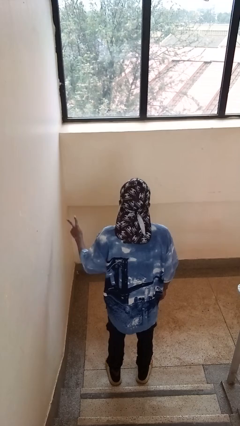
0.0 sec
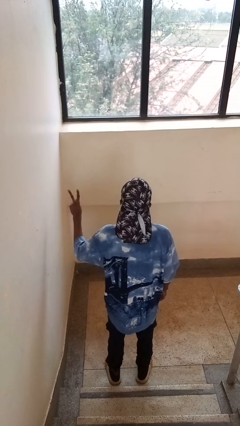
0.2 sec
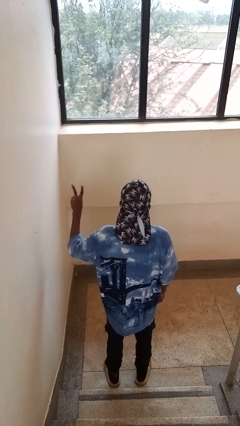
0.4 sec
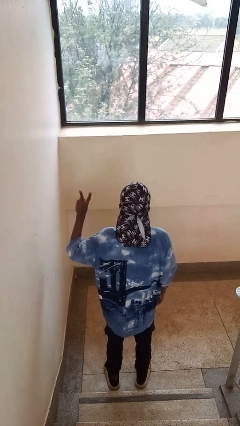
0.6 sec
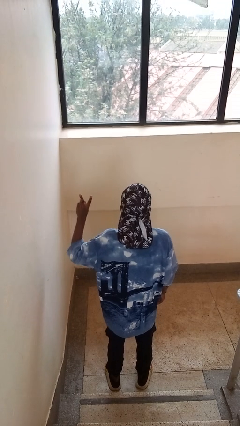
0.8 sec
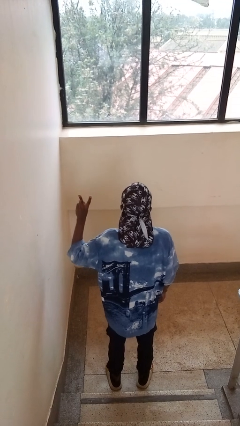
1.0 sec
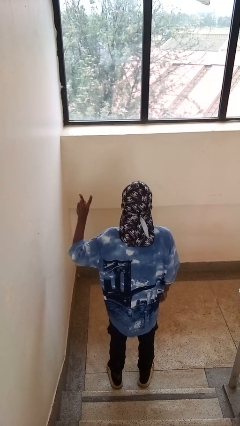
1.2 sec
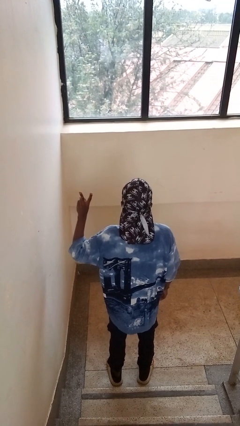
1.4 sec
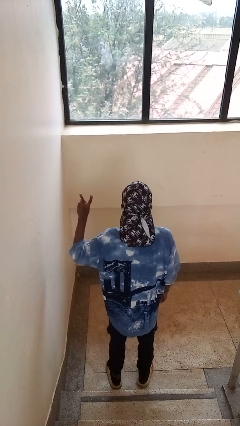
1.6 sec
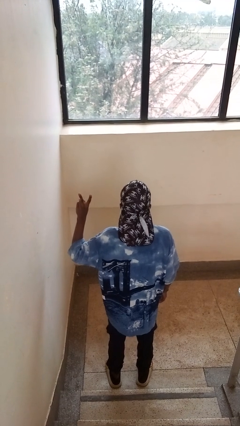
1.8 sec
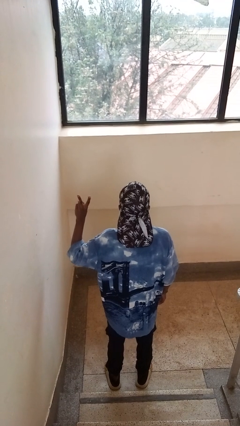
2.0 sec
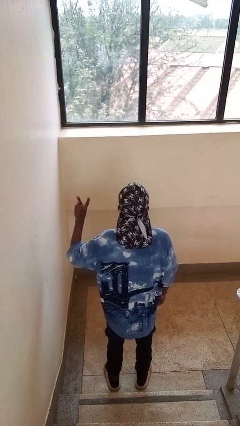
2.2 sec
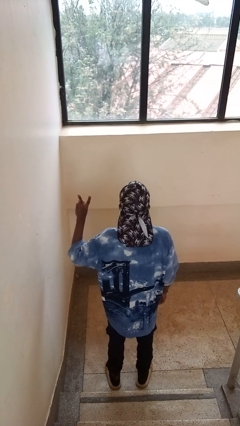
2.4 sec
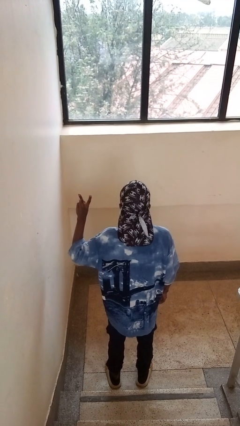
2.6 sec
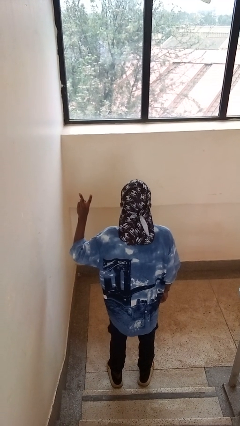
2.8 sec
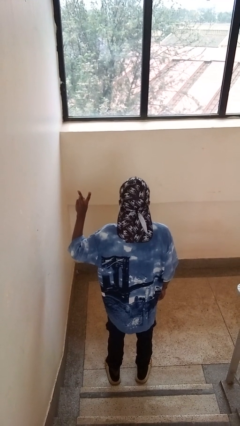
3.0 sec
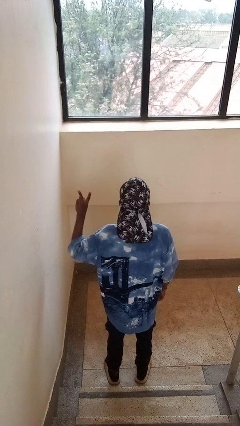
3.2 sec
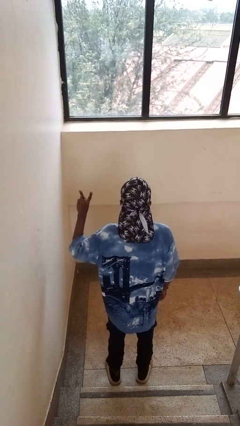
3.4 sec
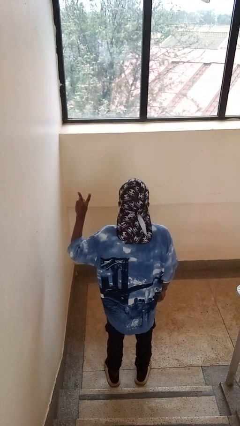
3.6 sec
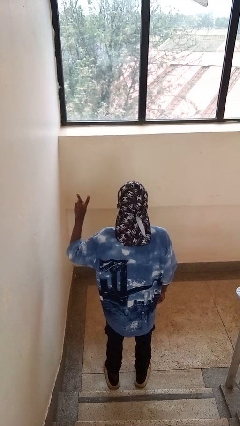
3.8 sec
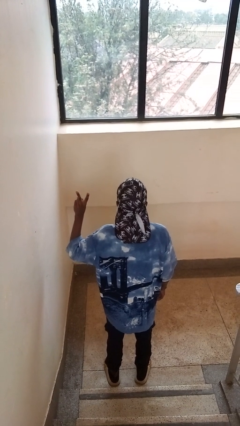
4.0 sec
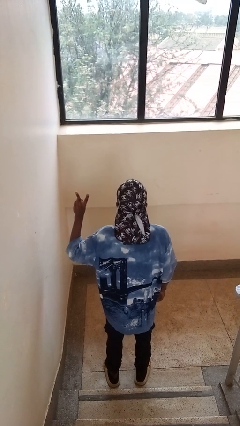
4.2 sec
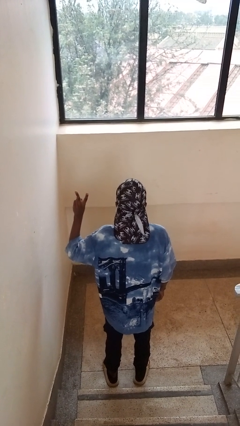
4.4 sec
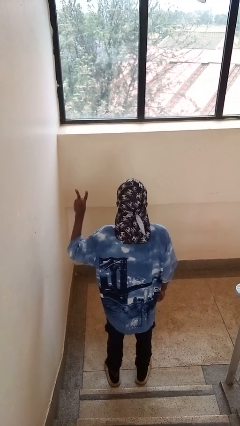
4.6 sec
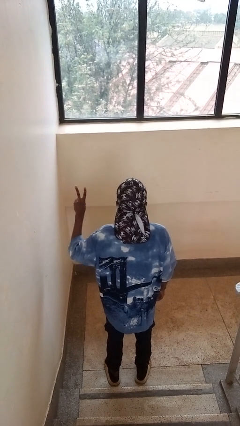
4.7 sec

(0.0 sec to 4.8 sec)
person gestures peace

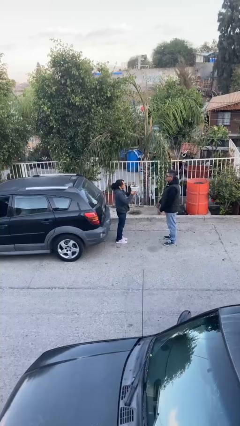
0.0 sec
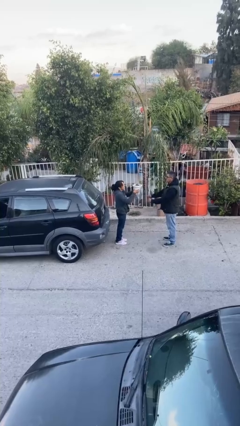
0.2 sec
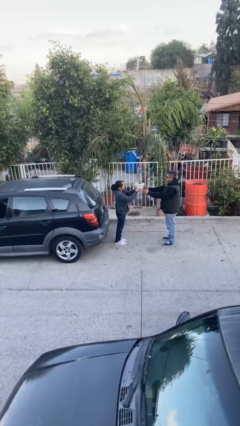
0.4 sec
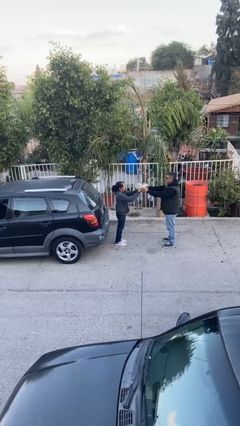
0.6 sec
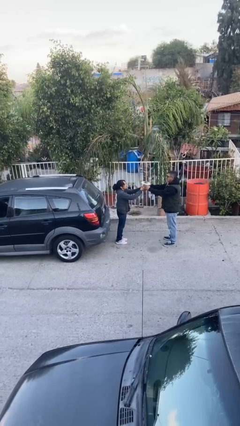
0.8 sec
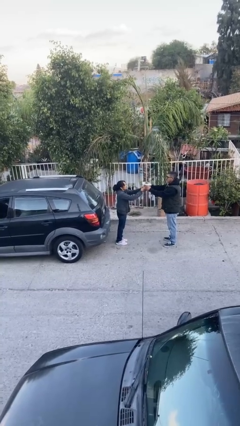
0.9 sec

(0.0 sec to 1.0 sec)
person transfers object to person

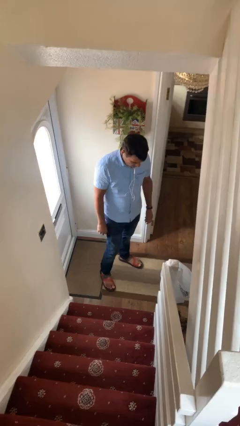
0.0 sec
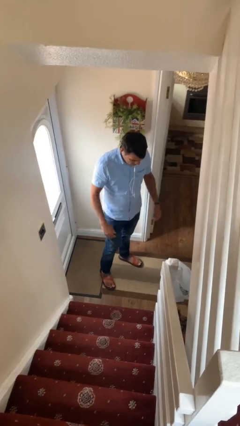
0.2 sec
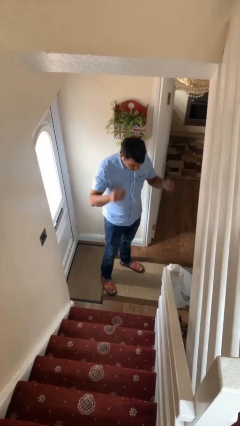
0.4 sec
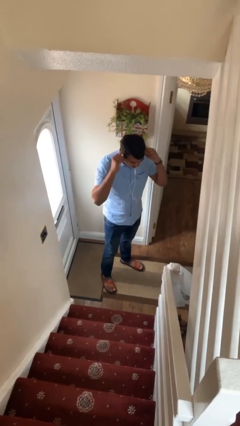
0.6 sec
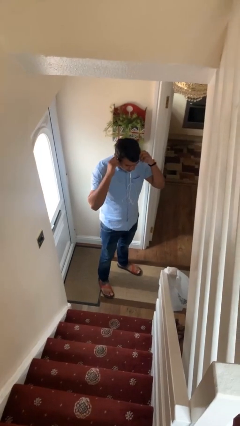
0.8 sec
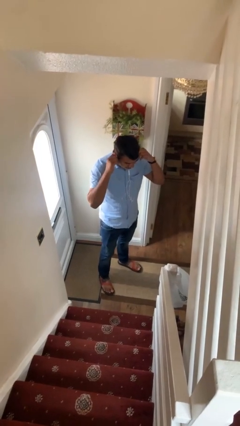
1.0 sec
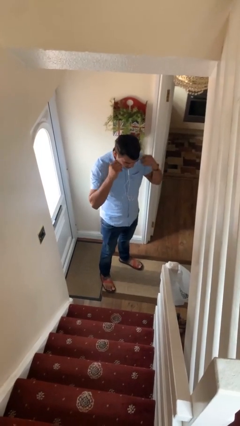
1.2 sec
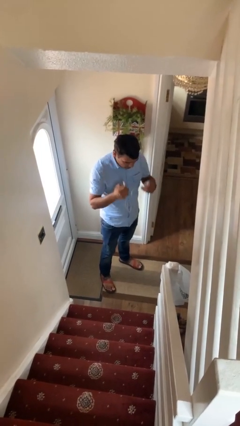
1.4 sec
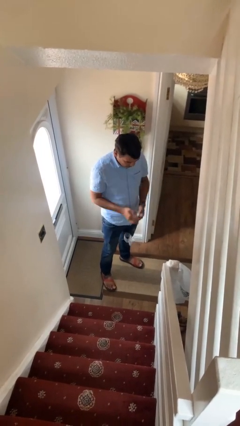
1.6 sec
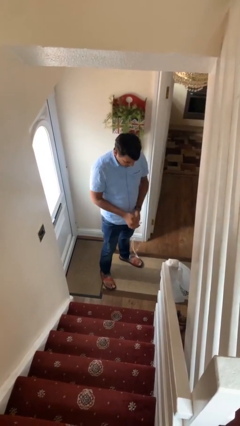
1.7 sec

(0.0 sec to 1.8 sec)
person takes off headphones

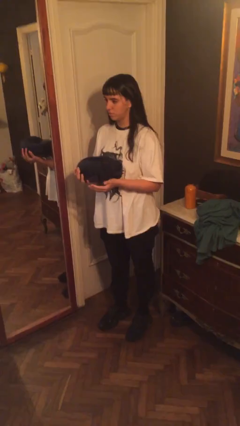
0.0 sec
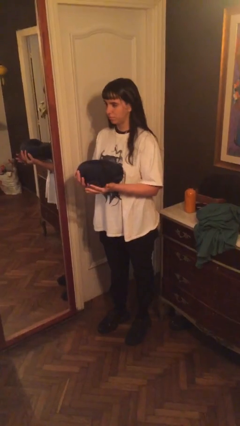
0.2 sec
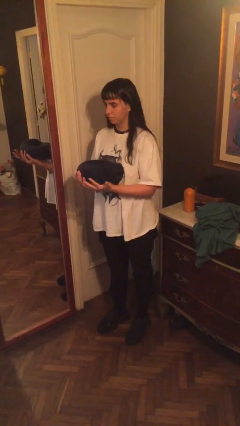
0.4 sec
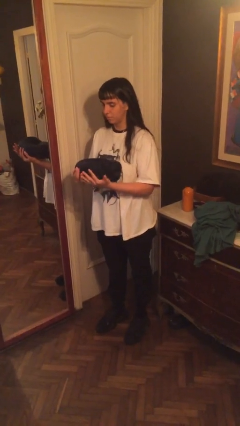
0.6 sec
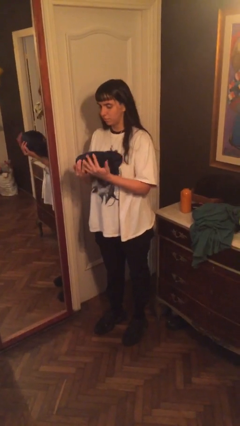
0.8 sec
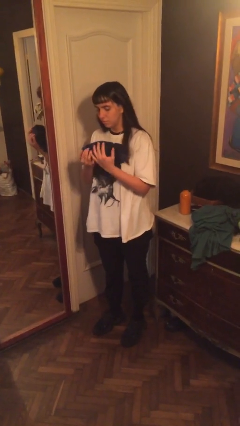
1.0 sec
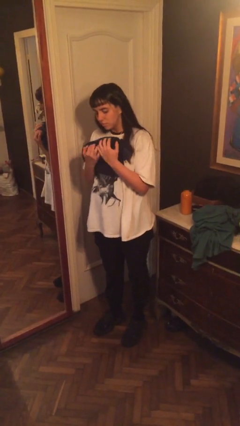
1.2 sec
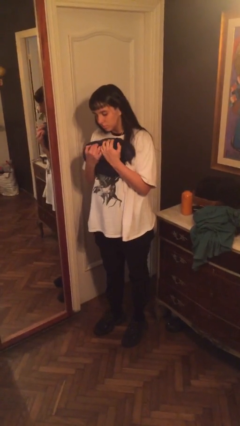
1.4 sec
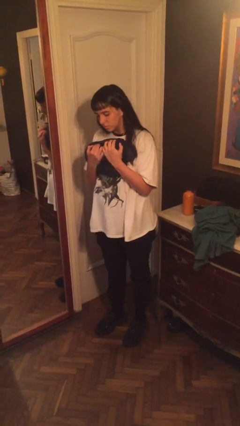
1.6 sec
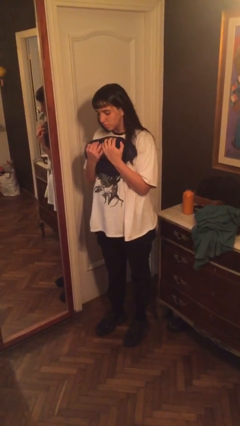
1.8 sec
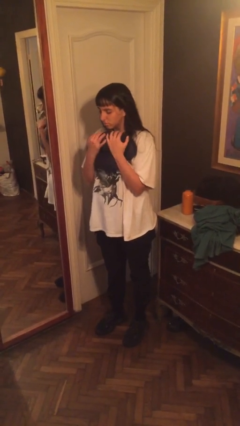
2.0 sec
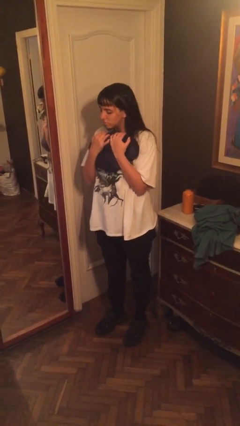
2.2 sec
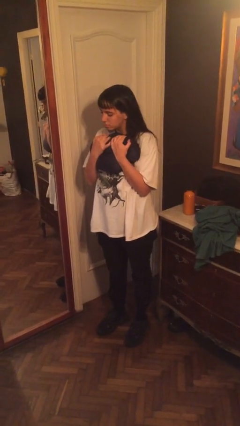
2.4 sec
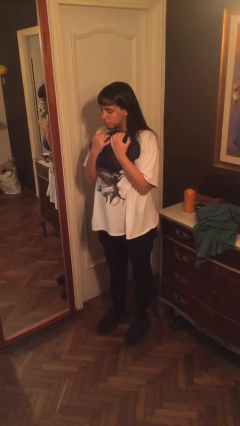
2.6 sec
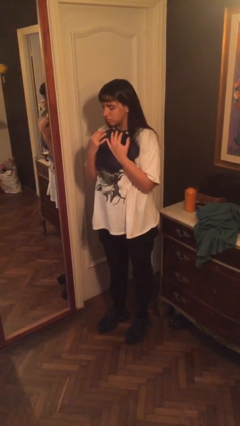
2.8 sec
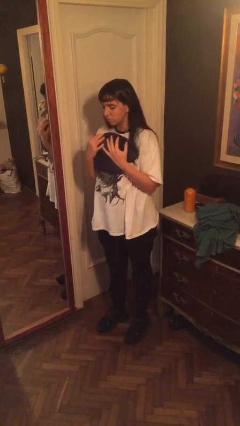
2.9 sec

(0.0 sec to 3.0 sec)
person squeezes object

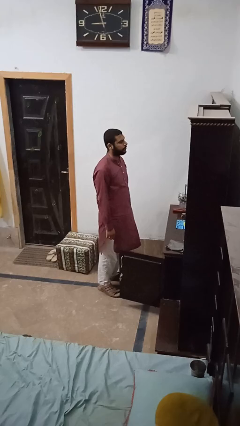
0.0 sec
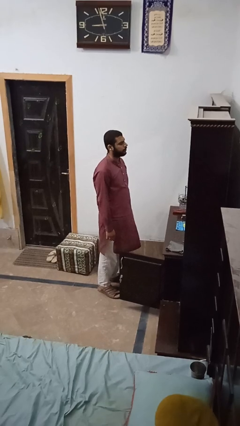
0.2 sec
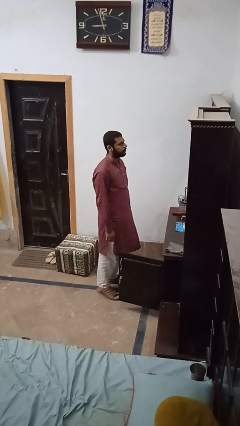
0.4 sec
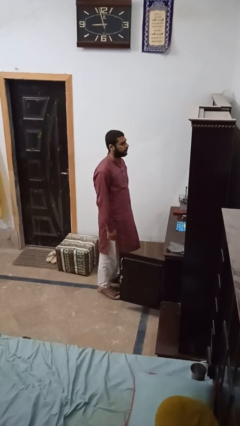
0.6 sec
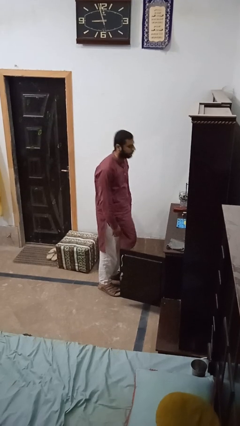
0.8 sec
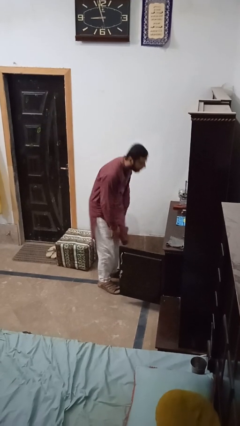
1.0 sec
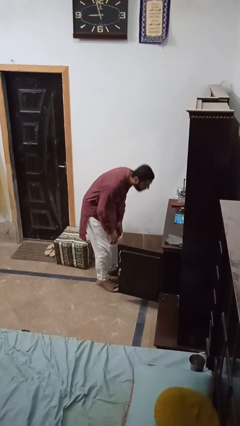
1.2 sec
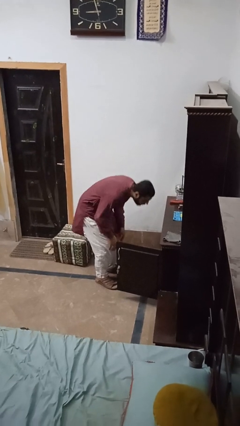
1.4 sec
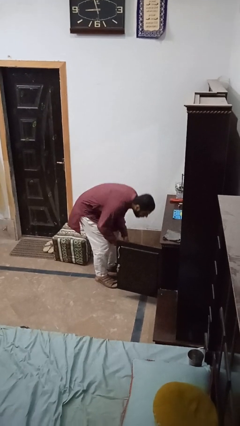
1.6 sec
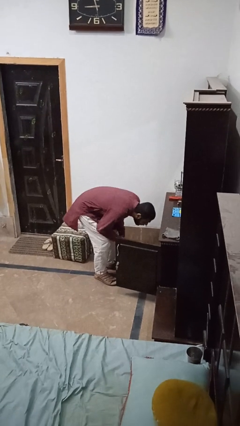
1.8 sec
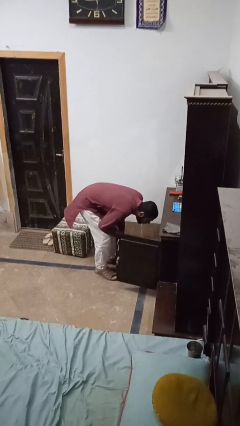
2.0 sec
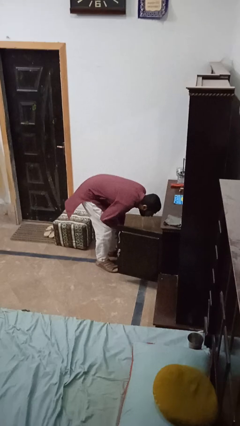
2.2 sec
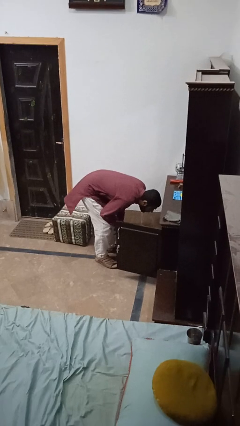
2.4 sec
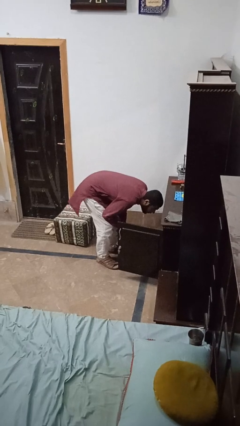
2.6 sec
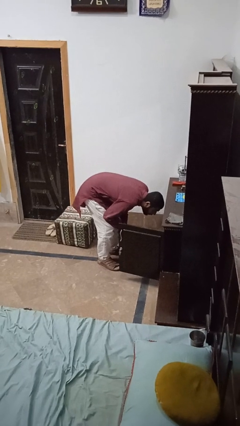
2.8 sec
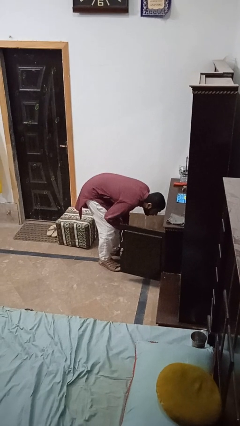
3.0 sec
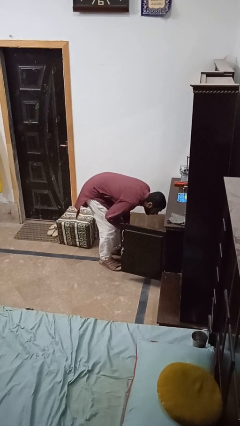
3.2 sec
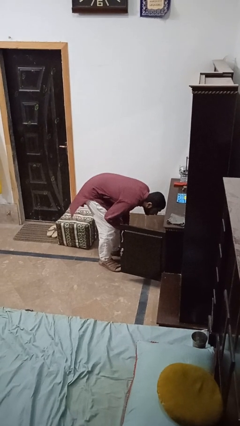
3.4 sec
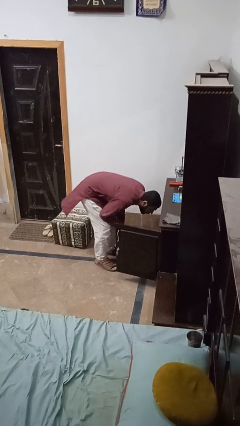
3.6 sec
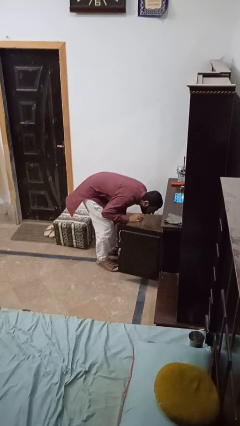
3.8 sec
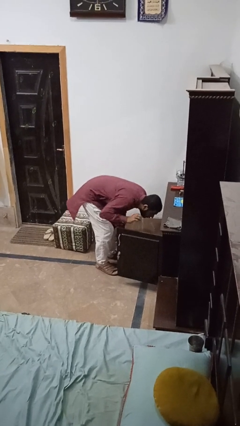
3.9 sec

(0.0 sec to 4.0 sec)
person searches in cabinet

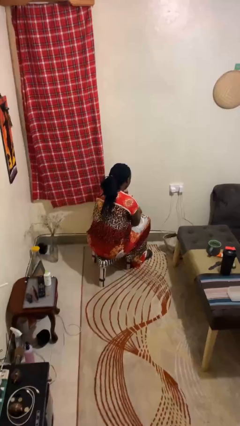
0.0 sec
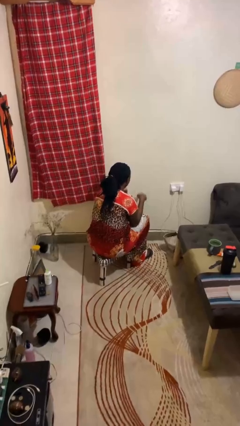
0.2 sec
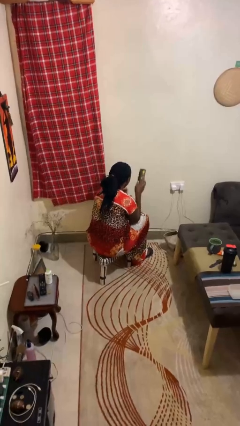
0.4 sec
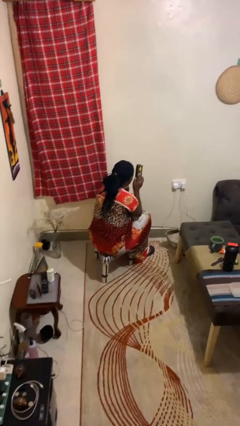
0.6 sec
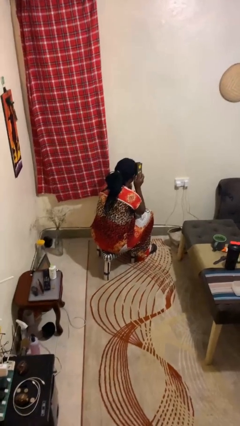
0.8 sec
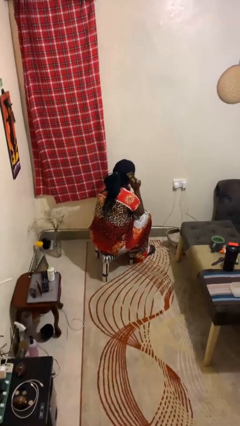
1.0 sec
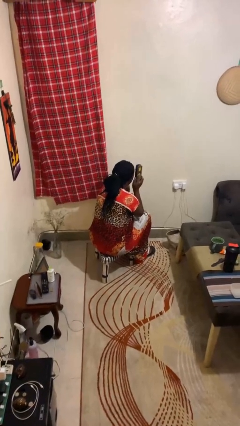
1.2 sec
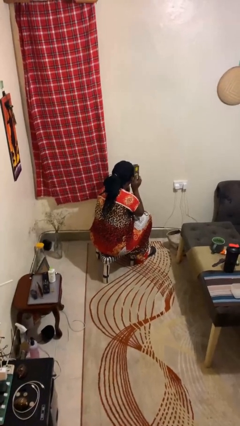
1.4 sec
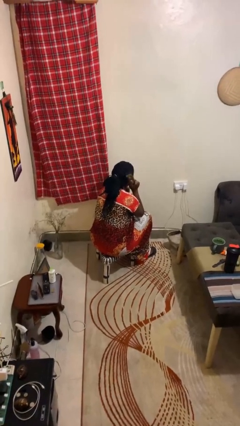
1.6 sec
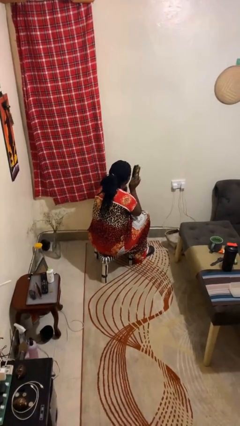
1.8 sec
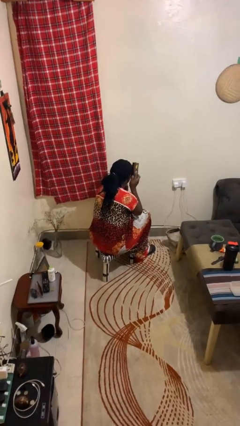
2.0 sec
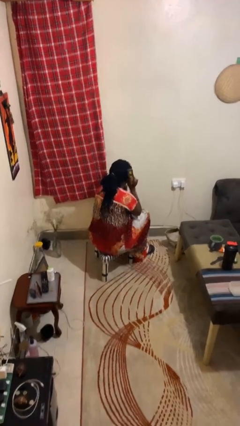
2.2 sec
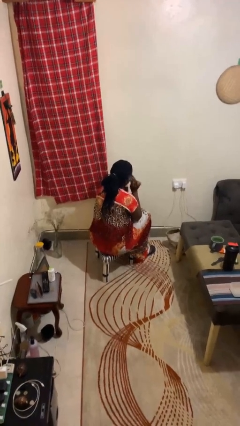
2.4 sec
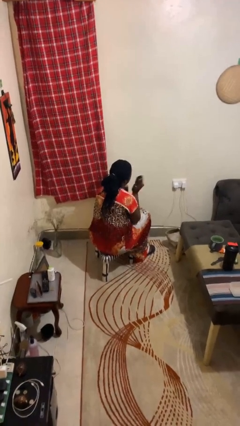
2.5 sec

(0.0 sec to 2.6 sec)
person brushes hair

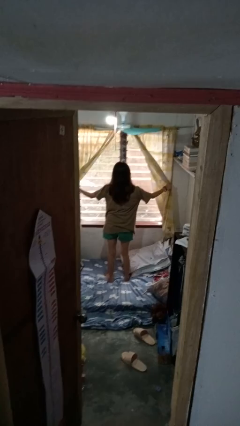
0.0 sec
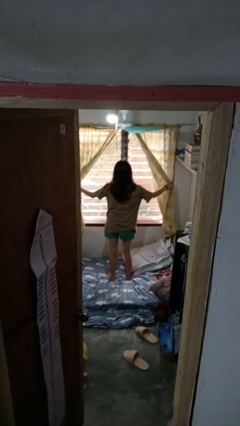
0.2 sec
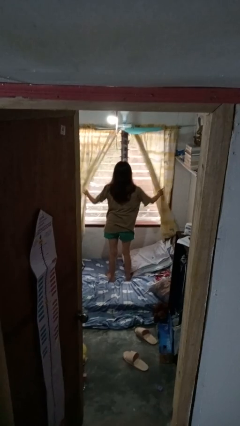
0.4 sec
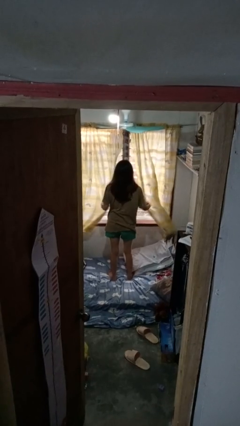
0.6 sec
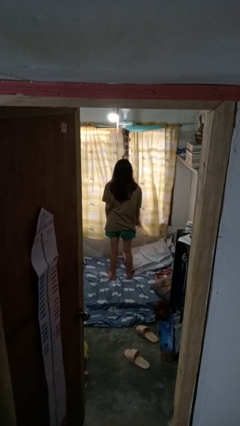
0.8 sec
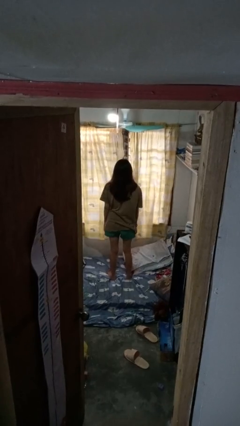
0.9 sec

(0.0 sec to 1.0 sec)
person closes curtains
